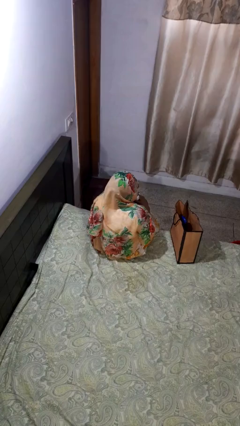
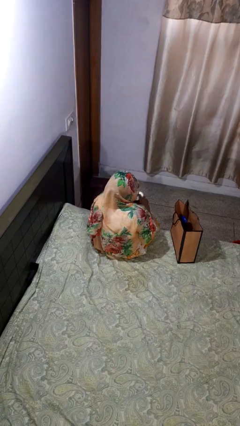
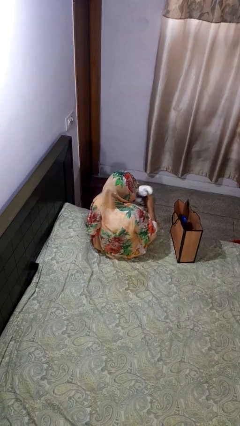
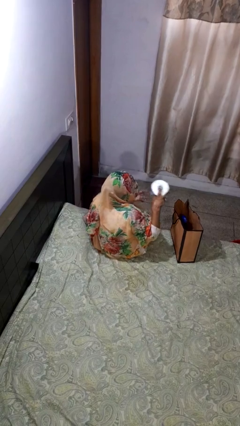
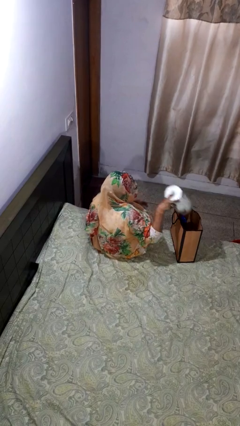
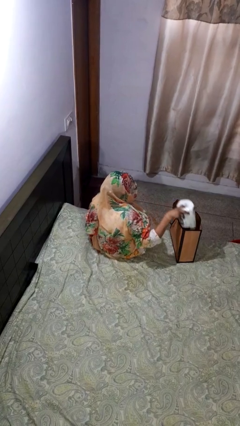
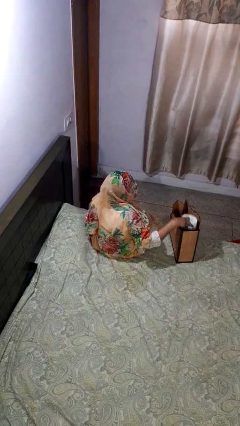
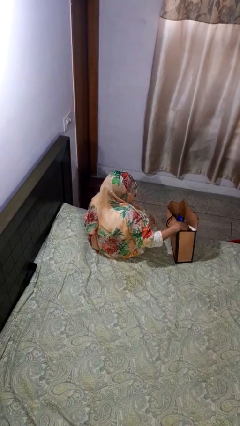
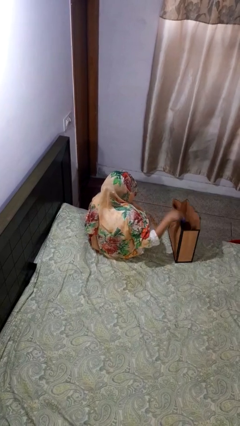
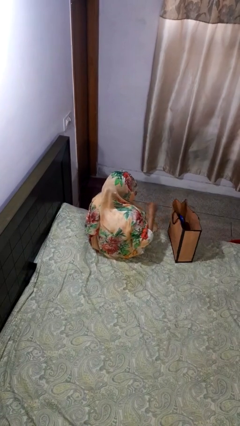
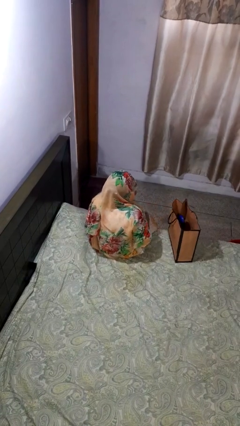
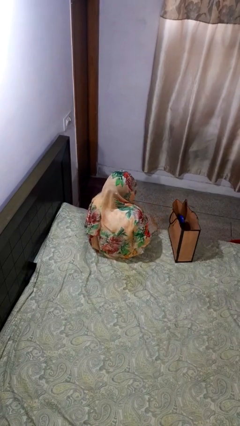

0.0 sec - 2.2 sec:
person puts object into bag

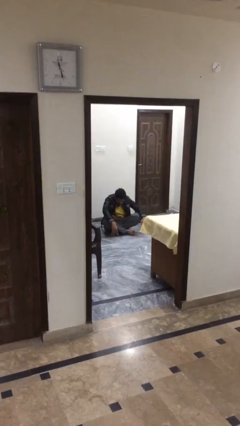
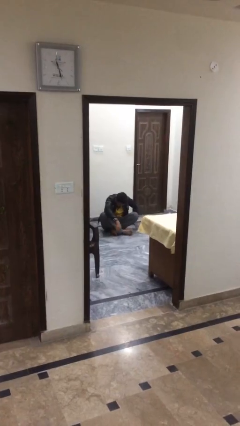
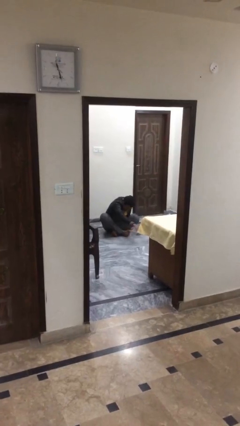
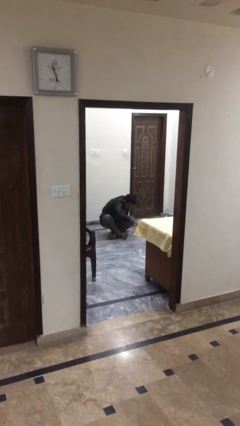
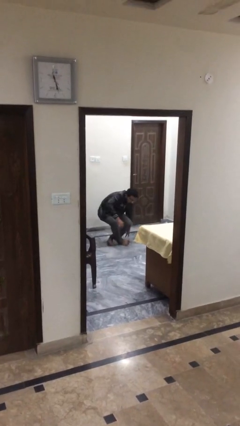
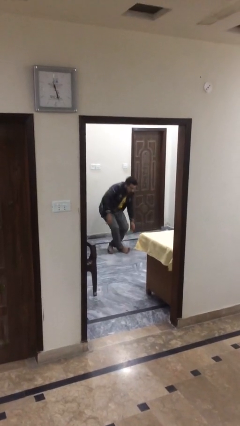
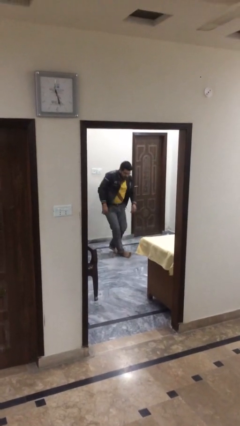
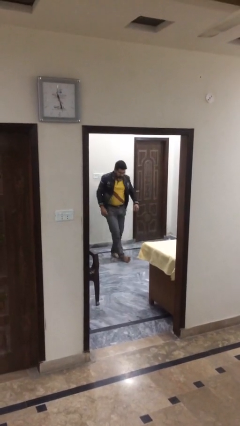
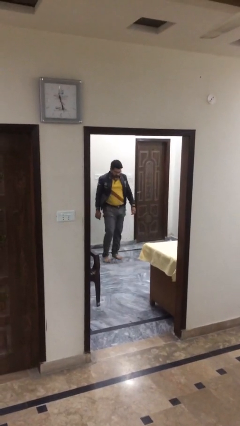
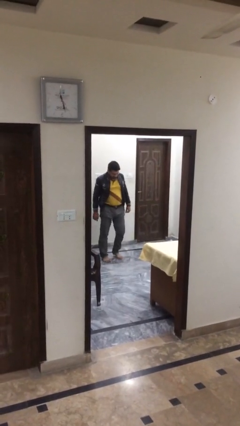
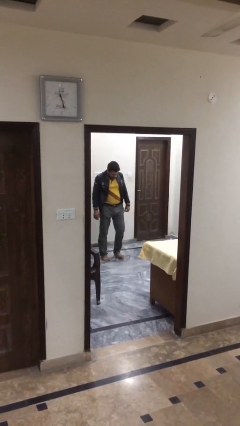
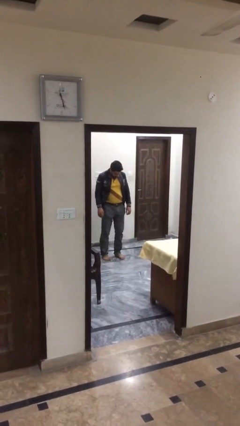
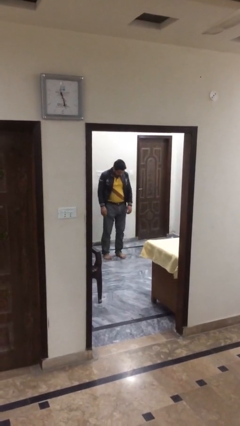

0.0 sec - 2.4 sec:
person stands up

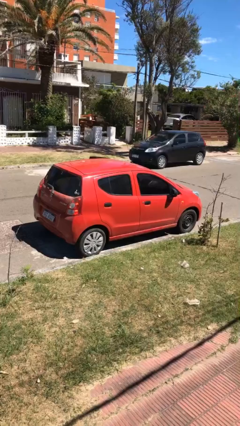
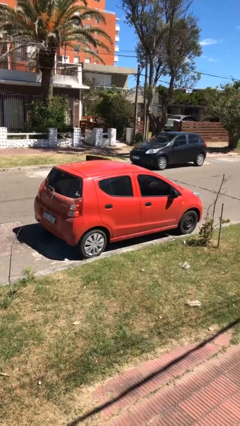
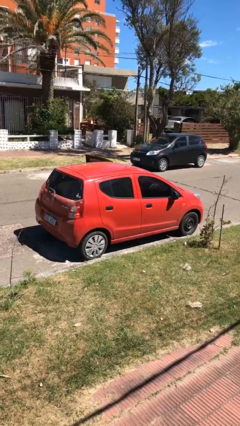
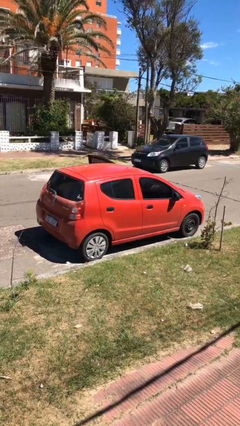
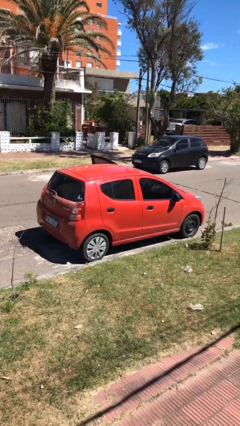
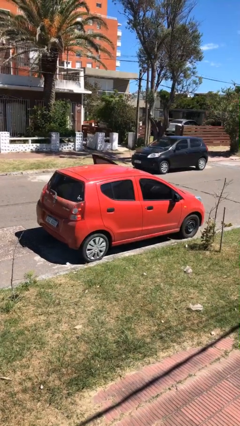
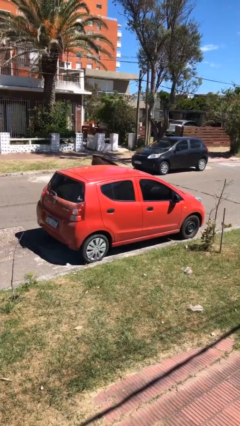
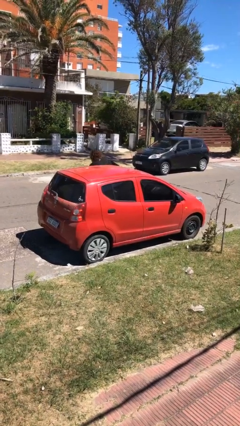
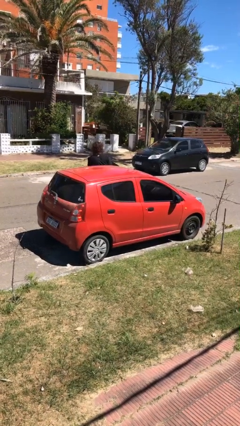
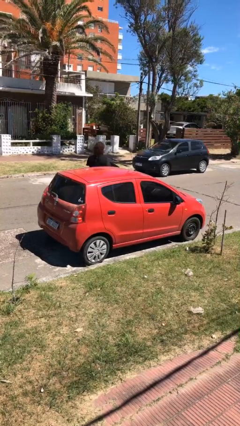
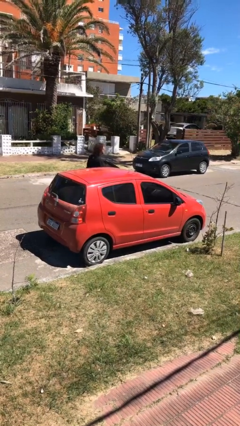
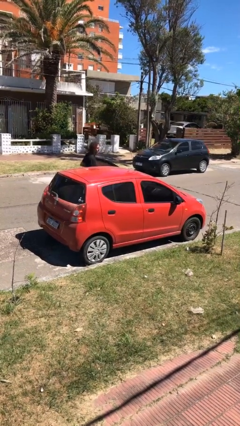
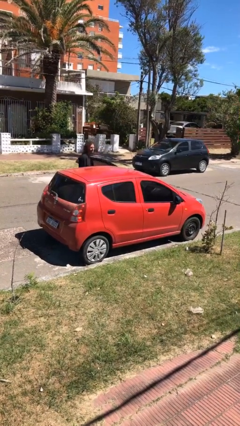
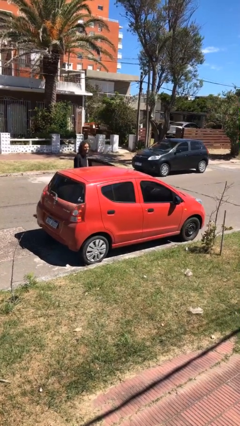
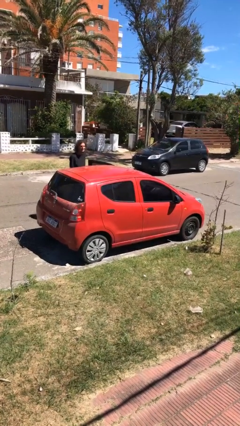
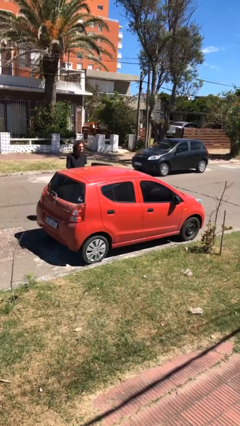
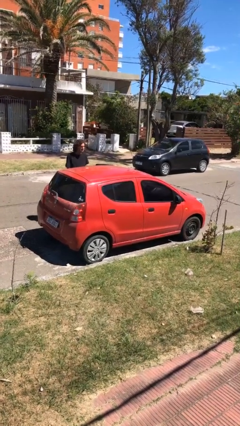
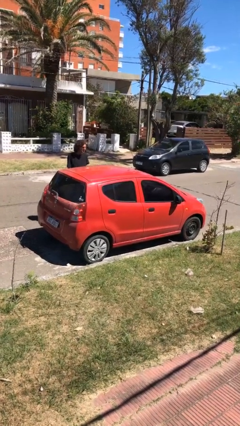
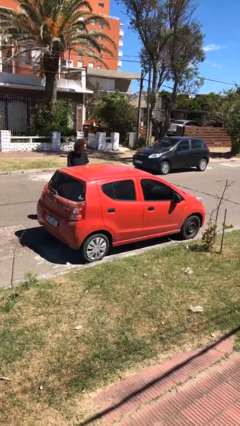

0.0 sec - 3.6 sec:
car drops off person

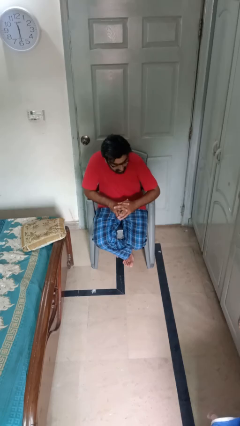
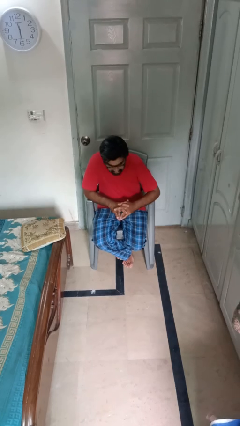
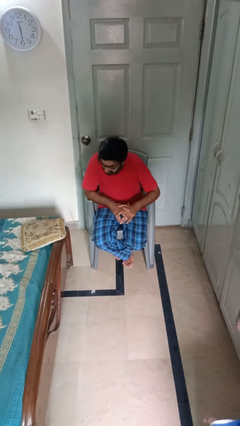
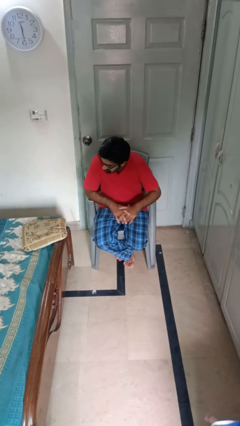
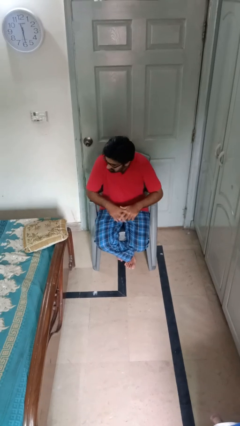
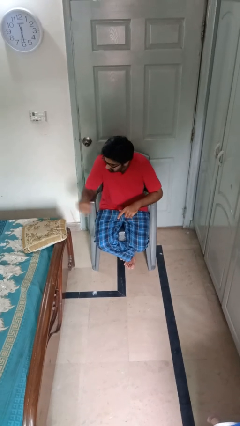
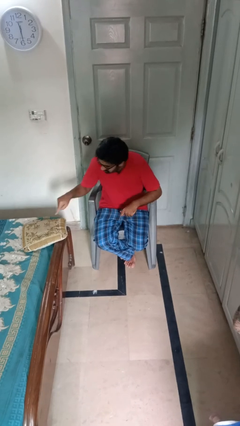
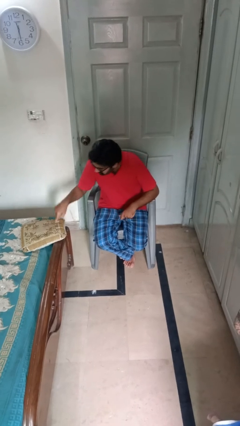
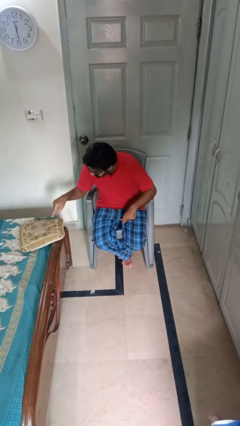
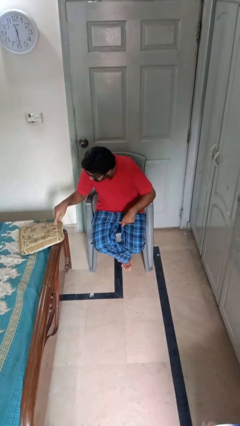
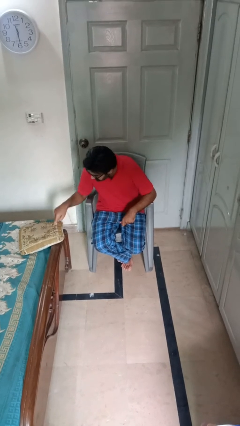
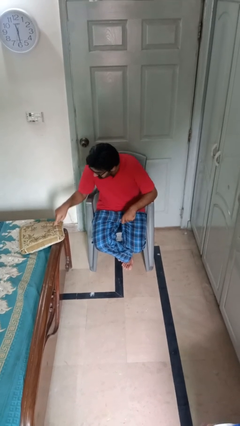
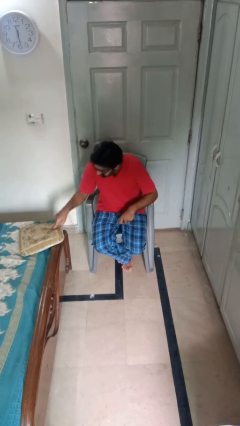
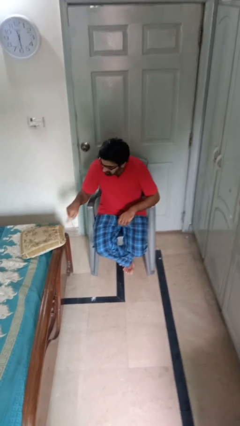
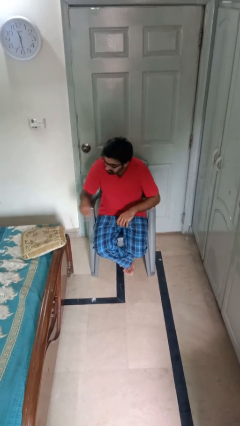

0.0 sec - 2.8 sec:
person taps object with finger

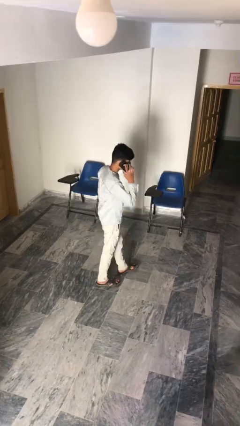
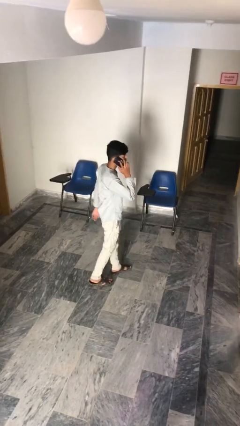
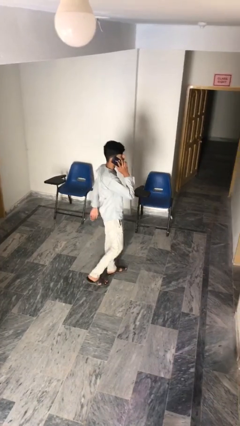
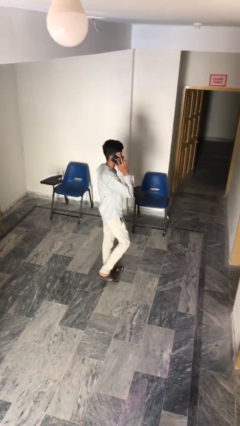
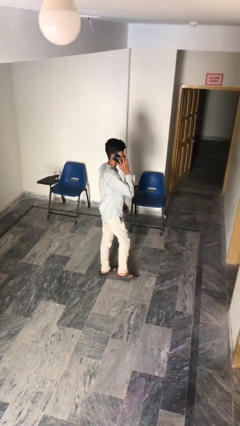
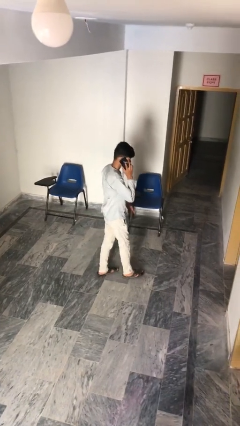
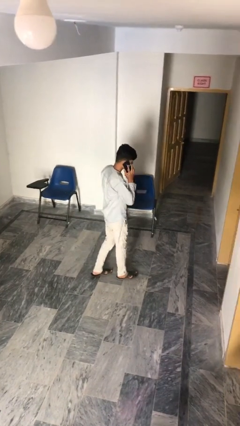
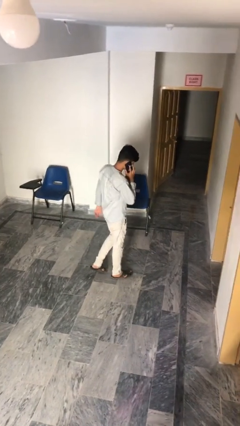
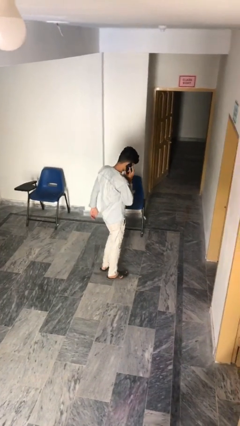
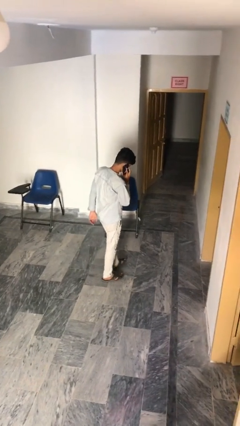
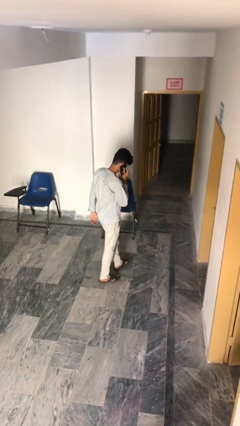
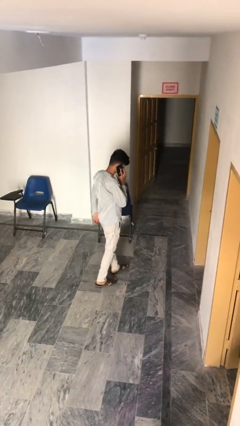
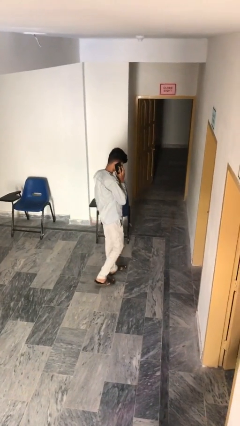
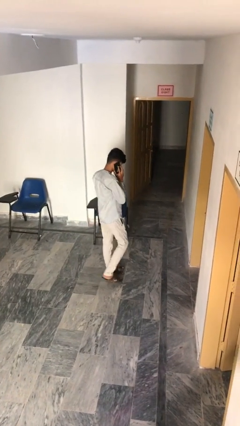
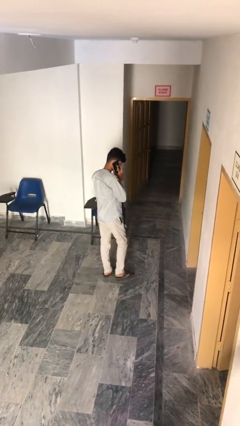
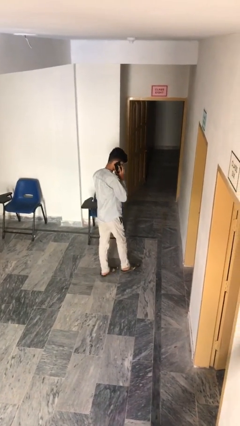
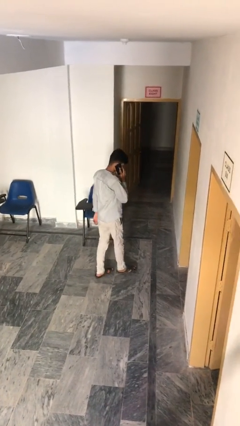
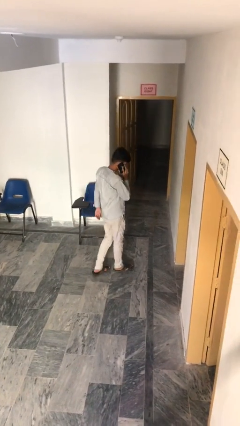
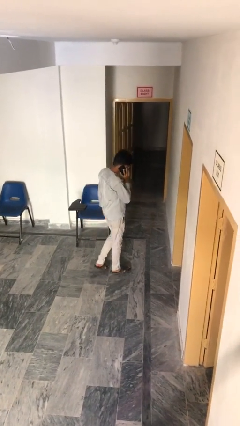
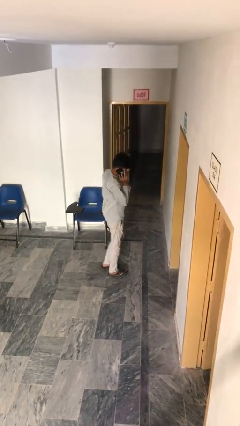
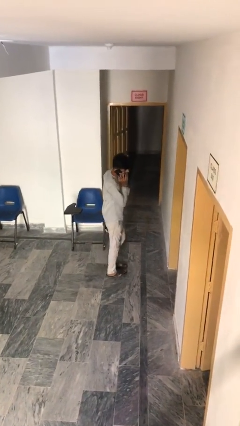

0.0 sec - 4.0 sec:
person talks on phone

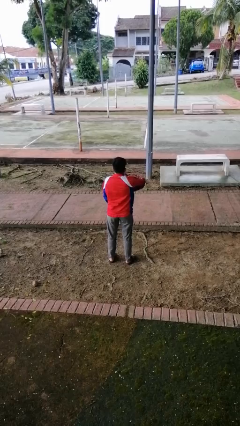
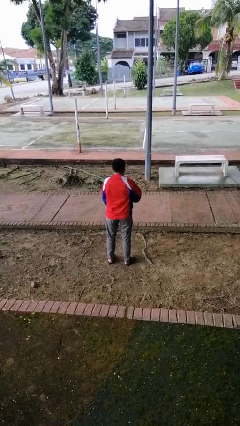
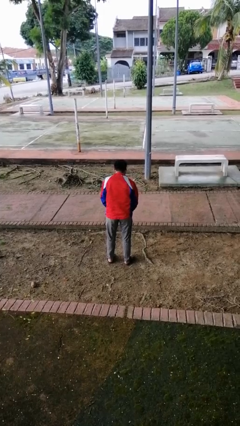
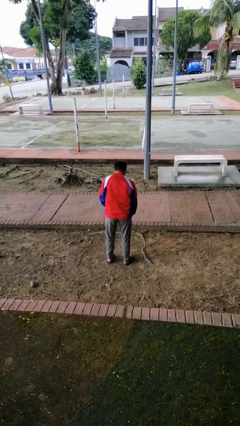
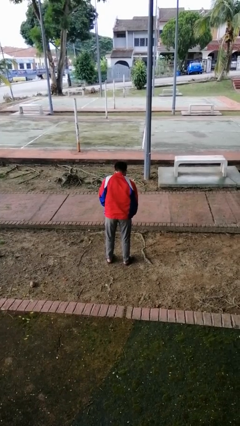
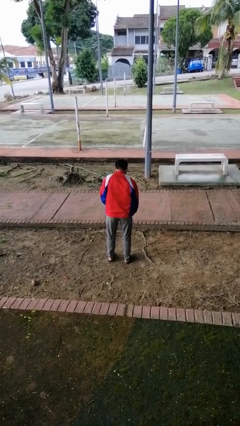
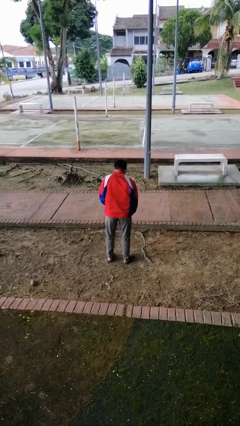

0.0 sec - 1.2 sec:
person unzips jacket

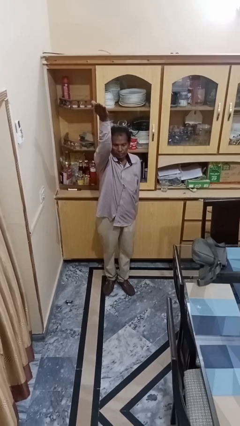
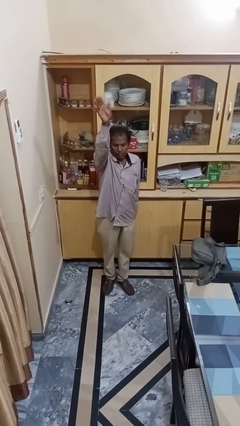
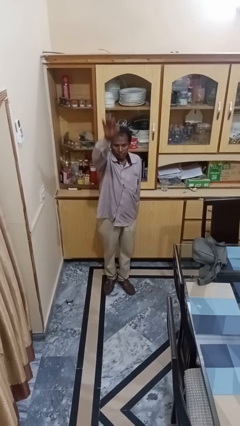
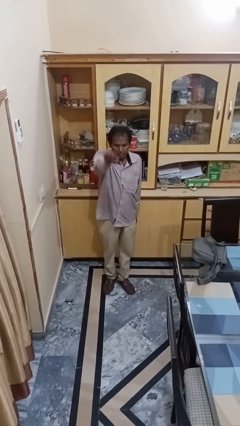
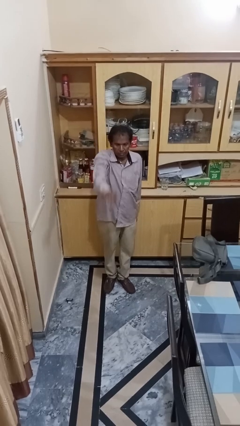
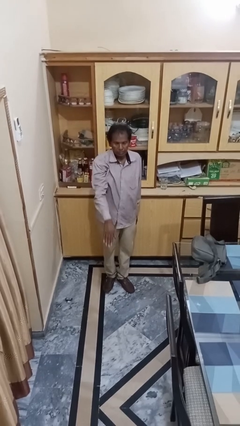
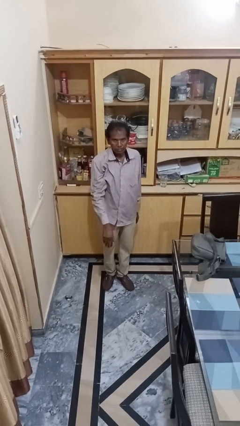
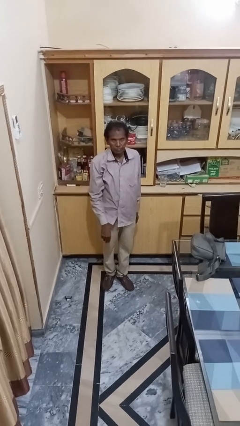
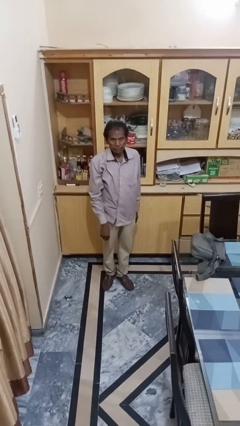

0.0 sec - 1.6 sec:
person gestures swipe down
